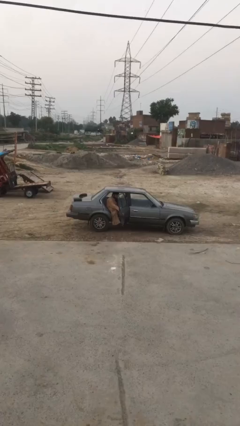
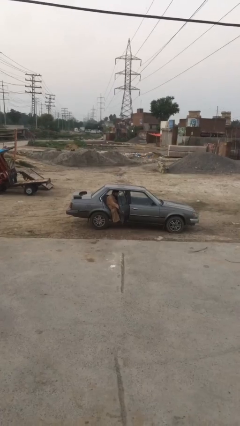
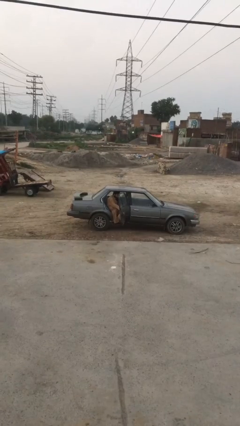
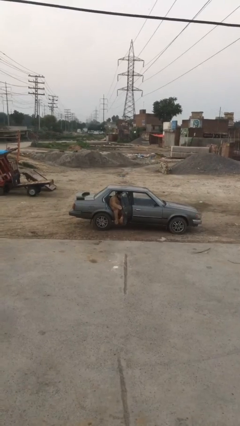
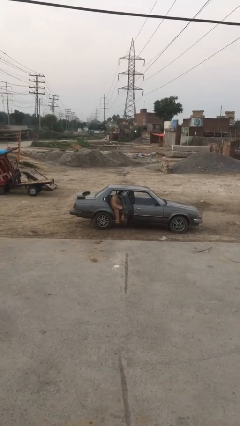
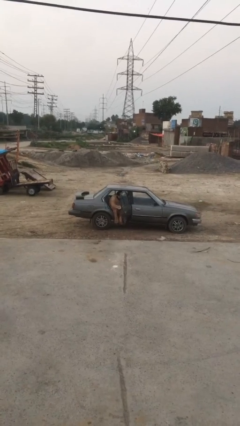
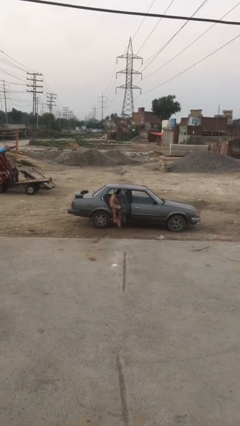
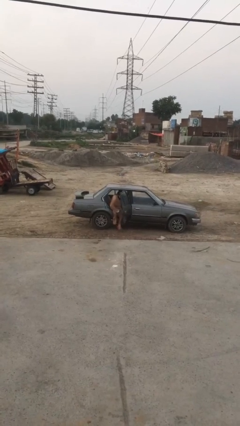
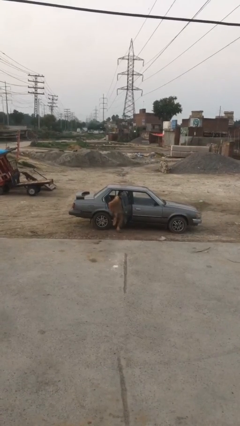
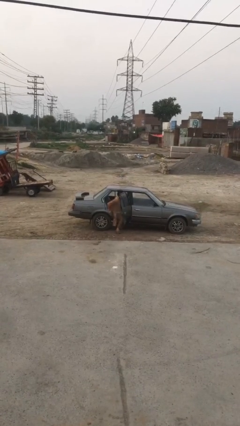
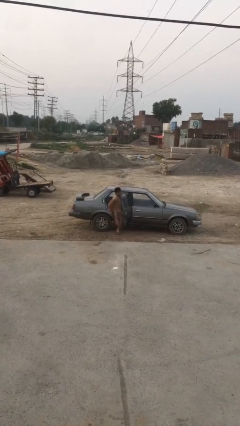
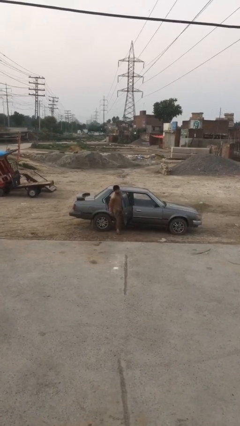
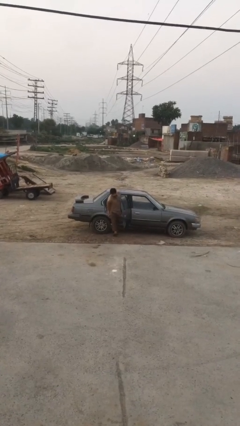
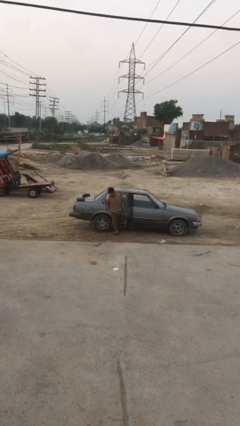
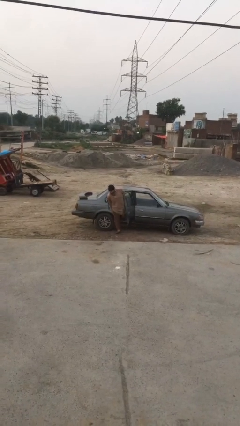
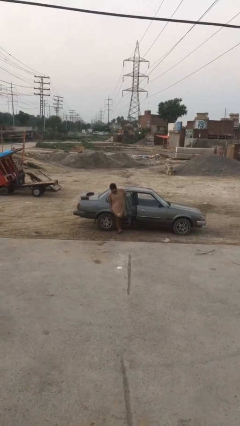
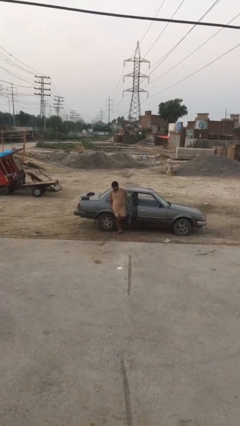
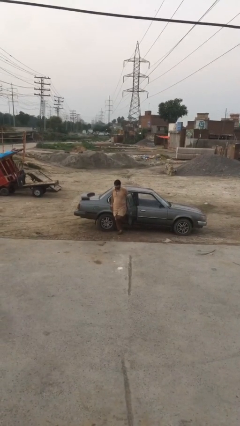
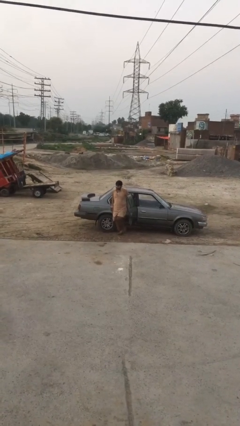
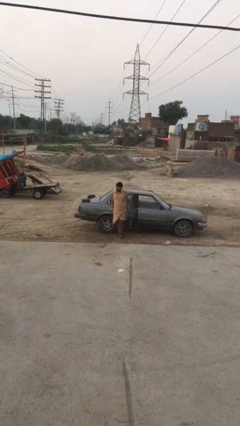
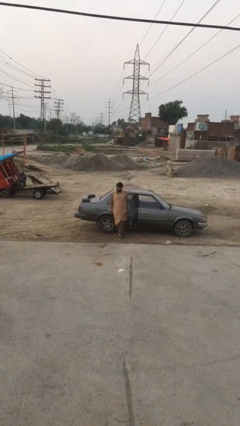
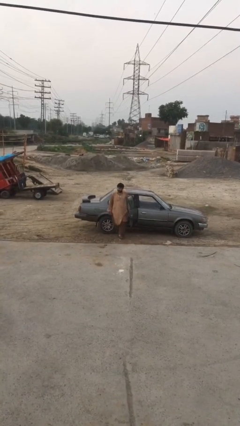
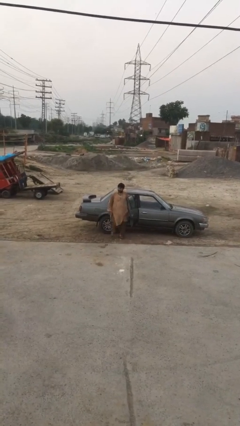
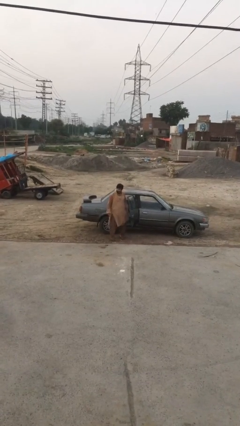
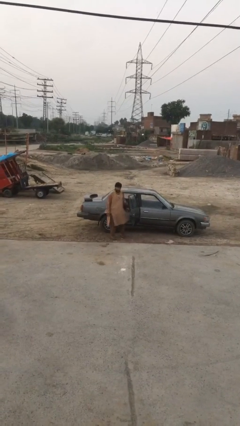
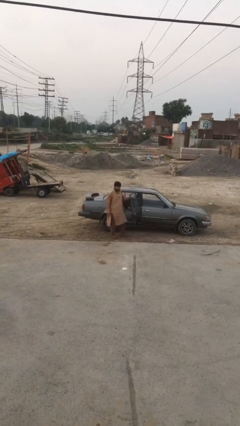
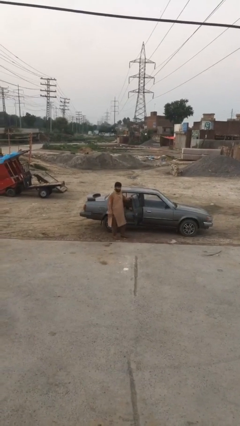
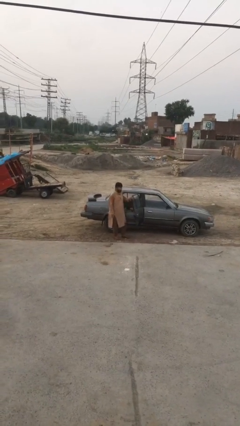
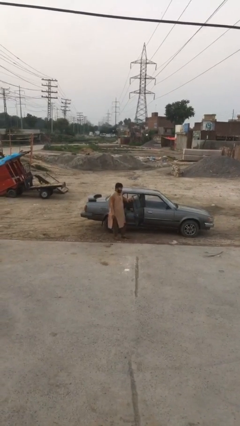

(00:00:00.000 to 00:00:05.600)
person exits car

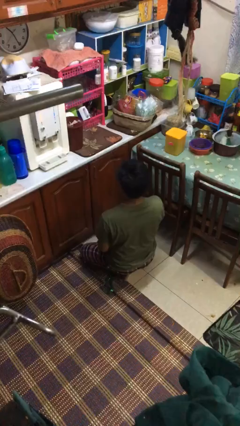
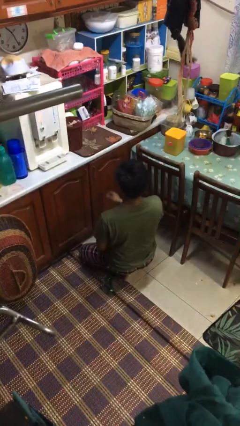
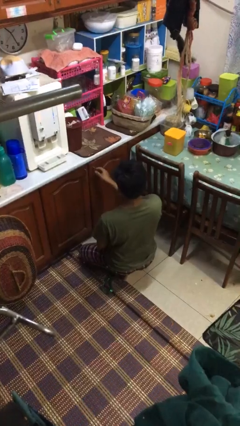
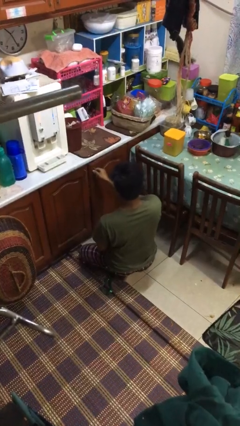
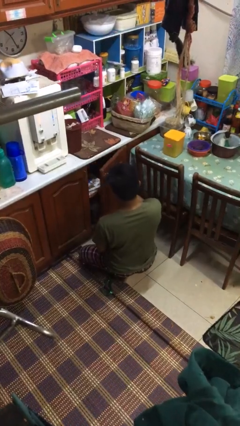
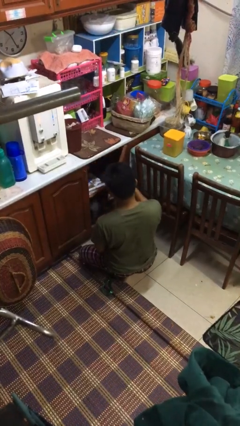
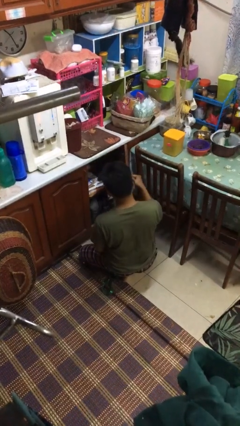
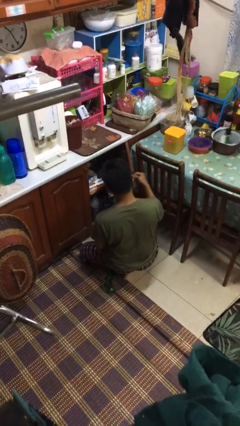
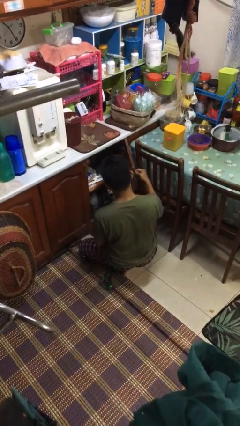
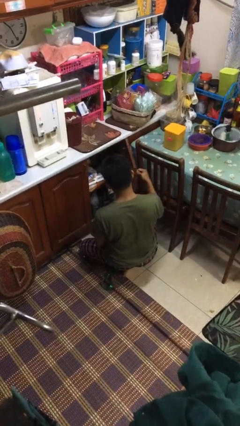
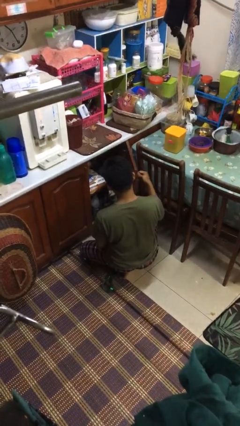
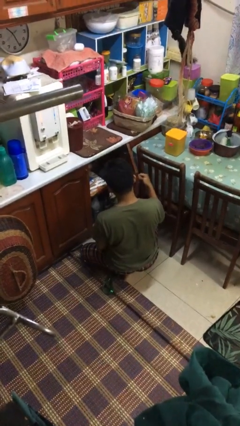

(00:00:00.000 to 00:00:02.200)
person opens kitchen drawer

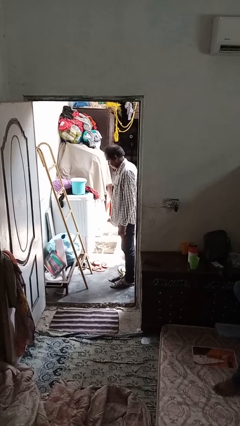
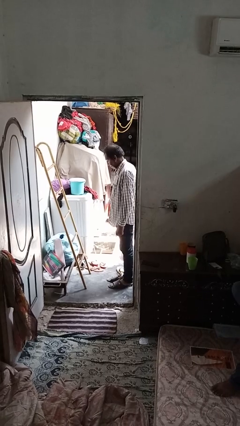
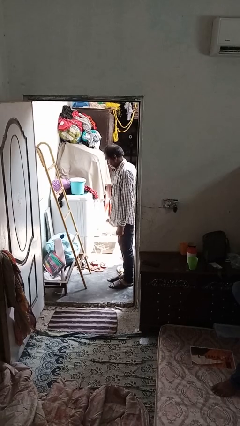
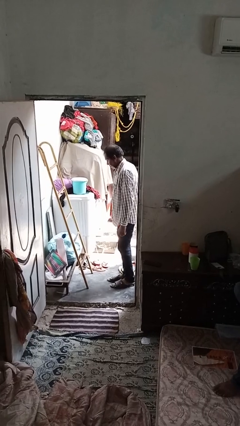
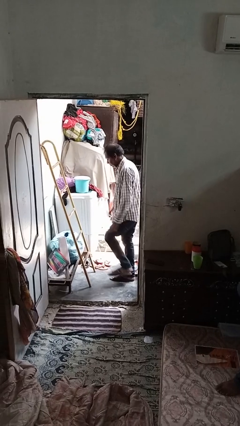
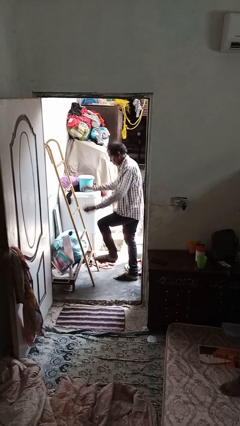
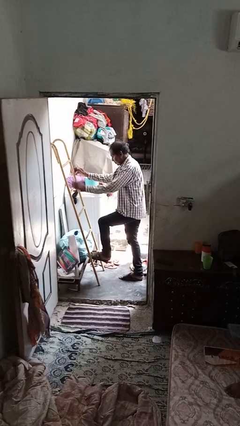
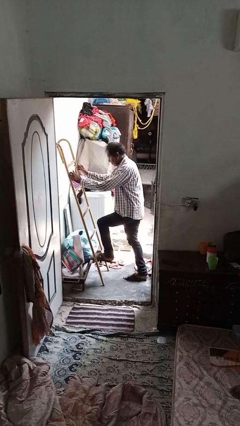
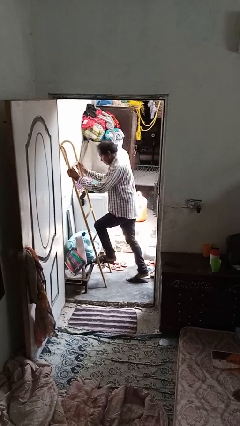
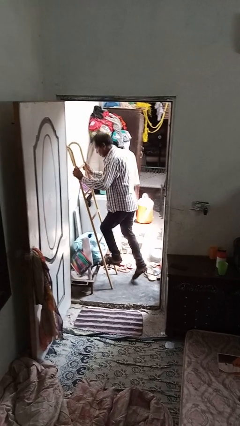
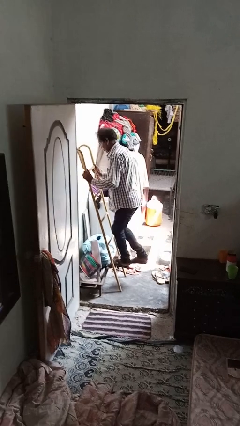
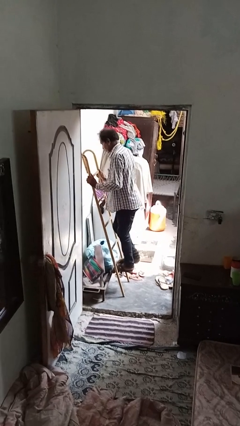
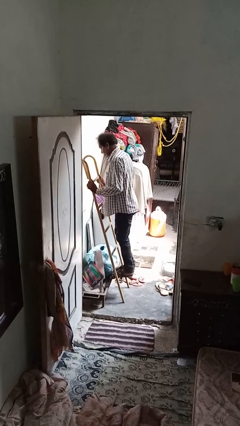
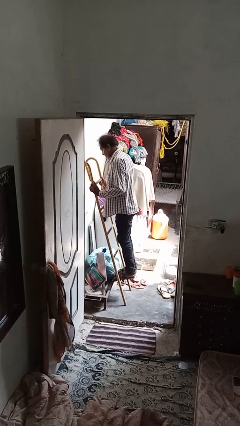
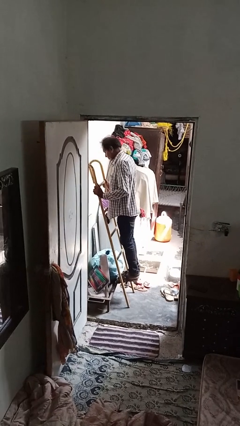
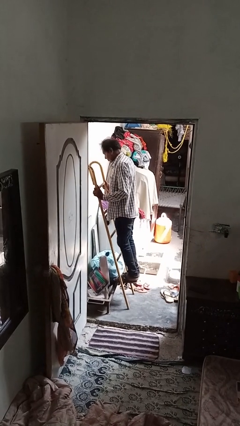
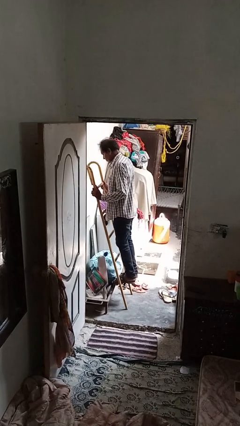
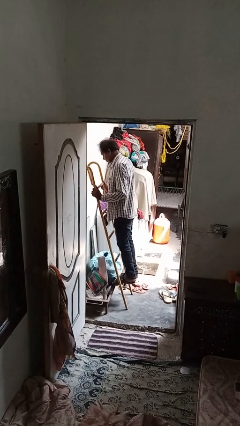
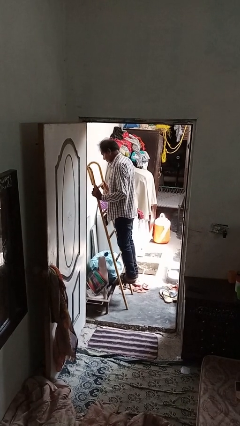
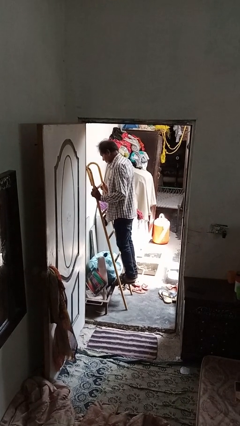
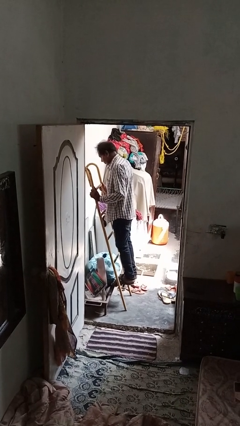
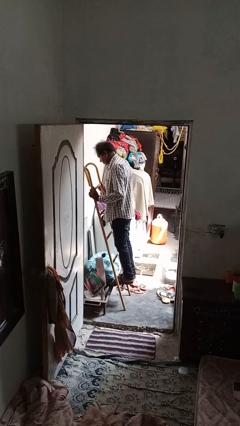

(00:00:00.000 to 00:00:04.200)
person climbs up ladder

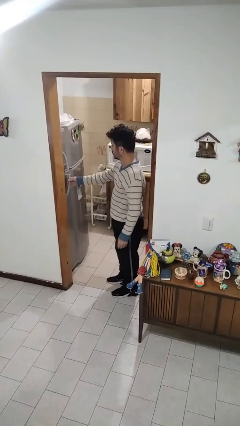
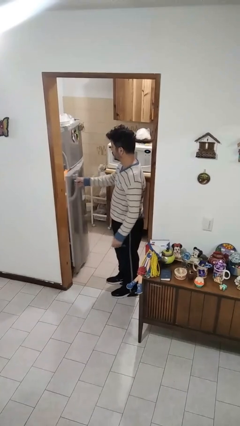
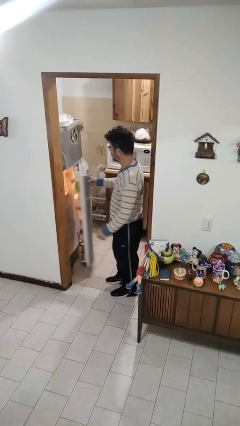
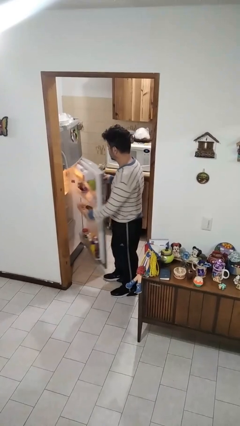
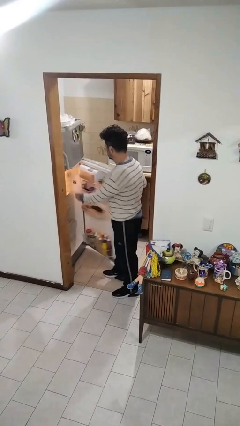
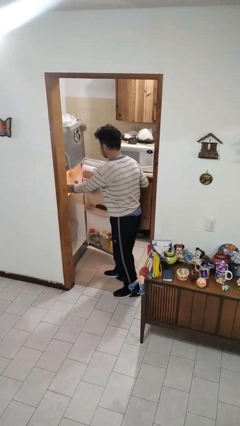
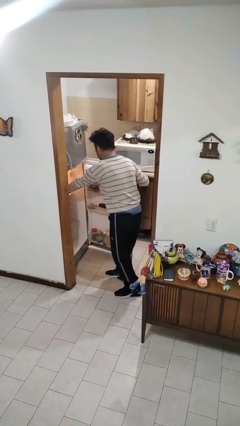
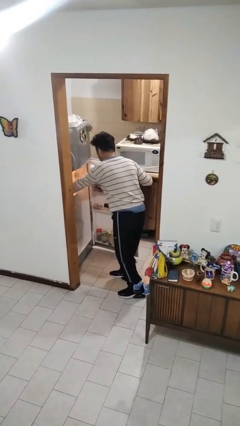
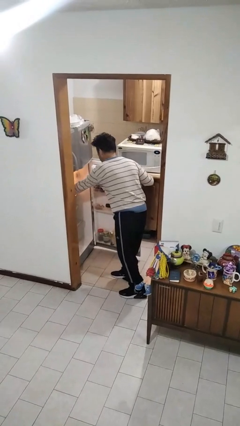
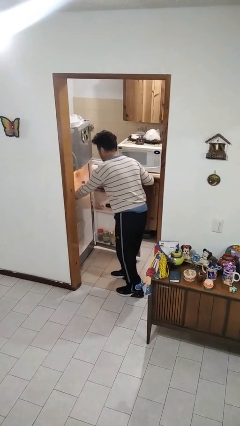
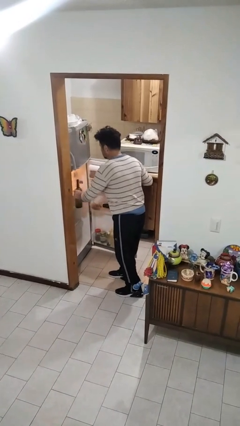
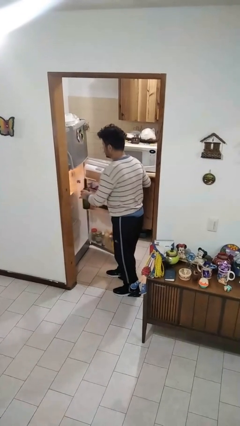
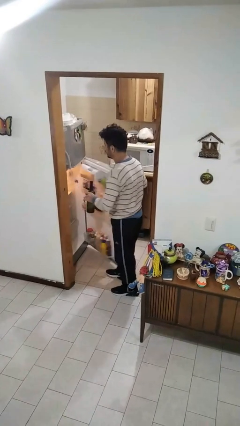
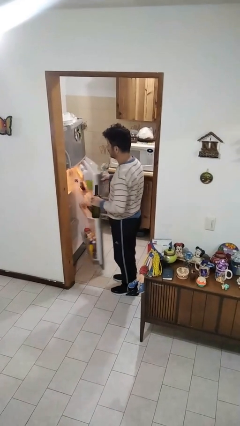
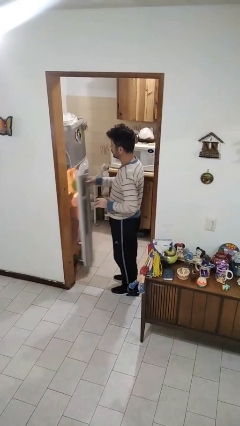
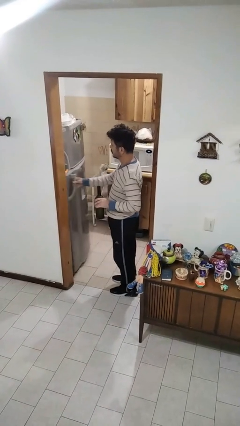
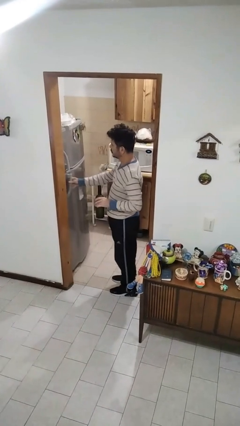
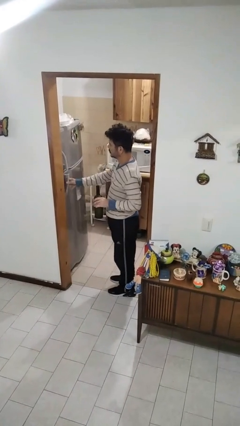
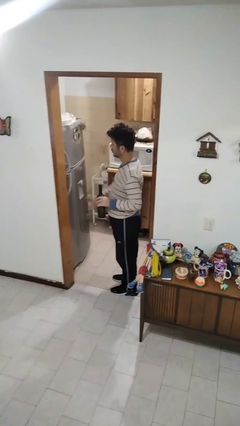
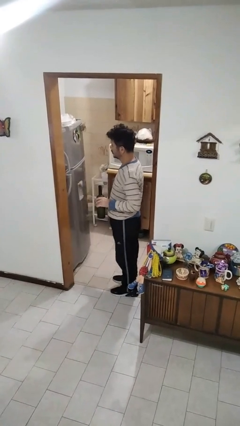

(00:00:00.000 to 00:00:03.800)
person takes object from refrigerator

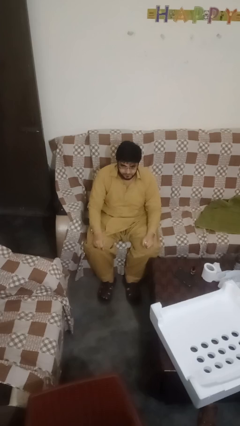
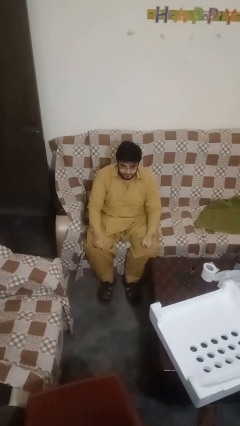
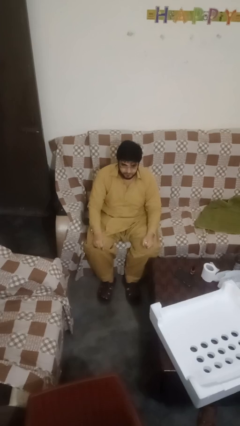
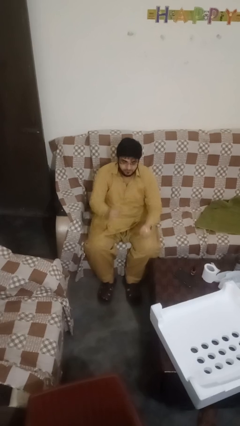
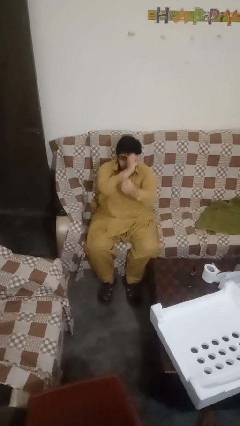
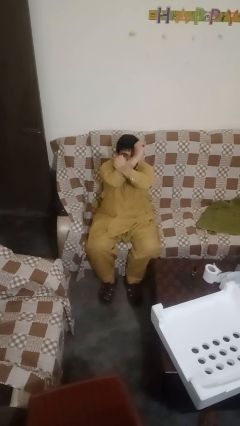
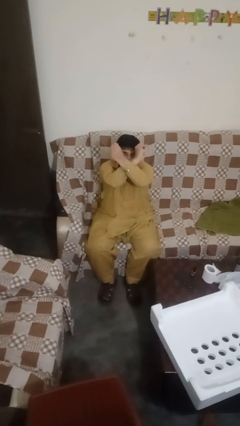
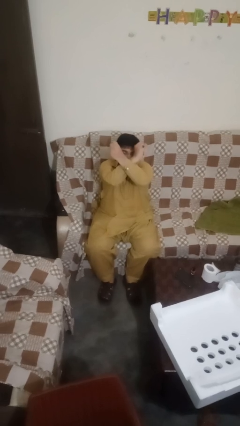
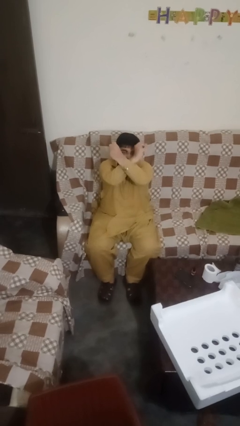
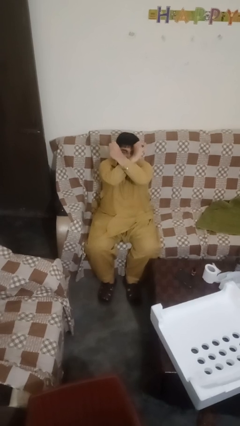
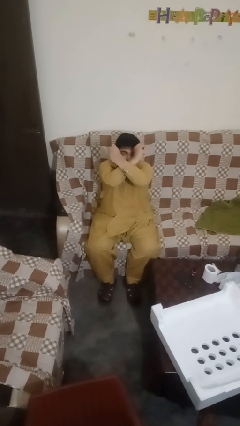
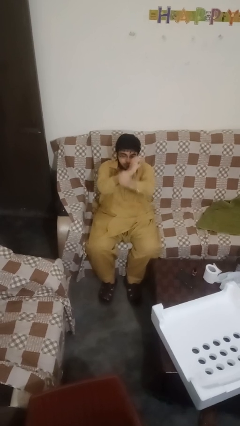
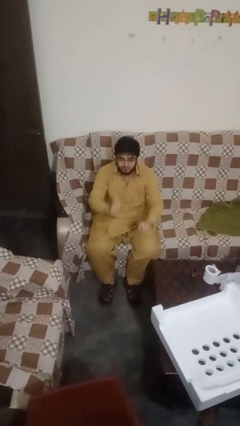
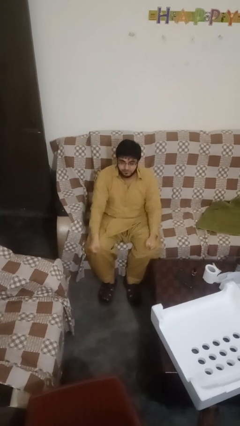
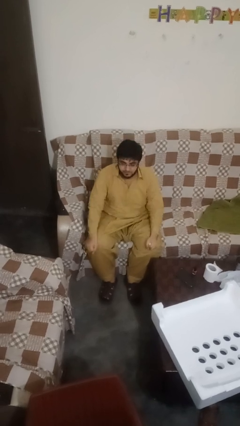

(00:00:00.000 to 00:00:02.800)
person gestures arms x
